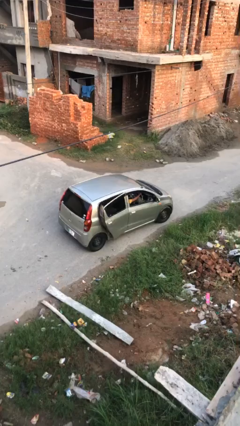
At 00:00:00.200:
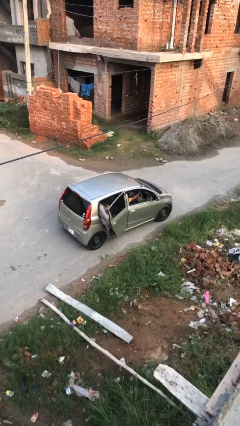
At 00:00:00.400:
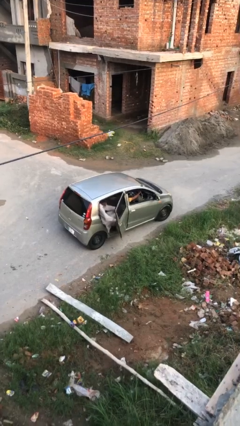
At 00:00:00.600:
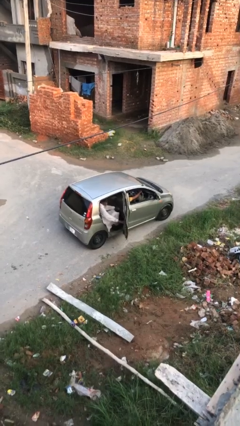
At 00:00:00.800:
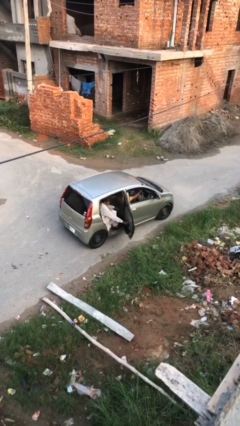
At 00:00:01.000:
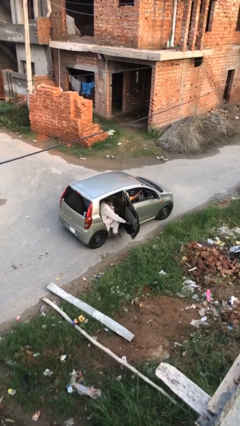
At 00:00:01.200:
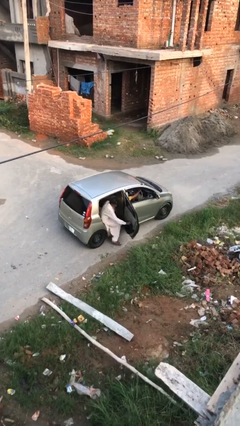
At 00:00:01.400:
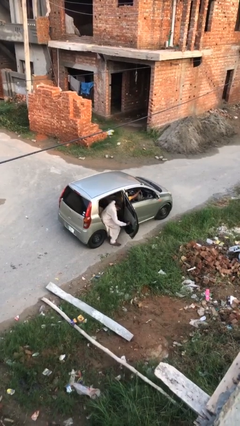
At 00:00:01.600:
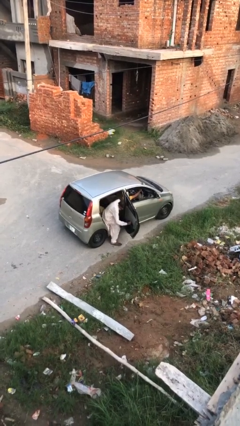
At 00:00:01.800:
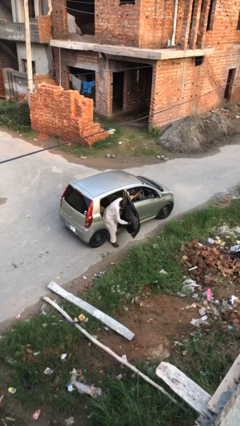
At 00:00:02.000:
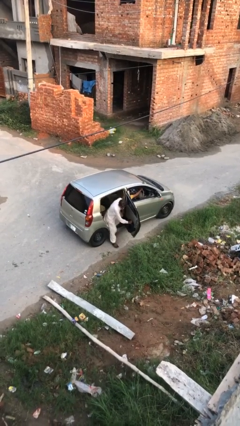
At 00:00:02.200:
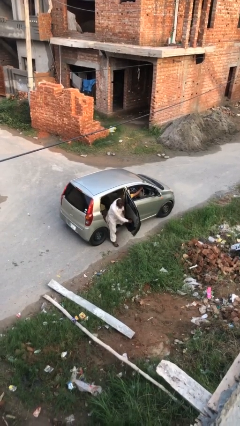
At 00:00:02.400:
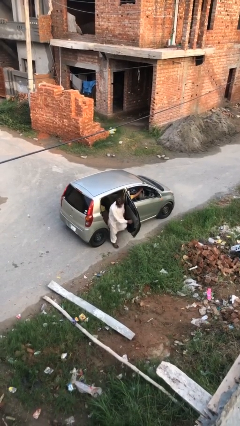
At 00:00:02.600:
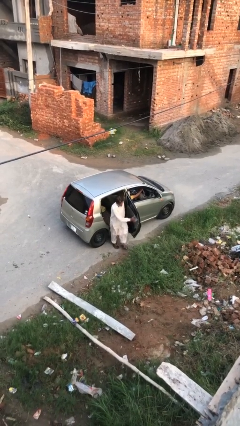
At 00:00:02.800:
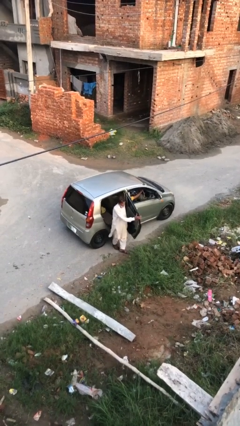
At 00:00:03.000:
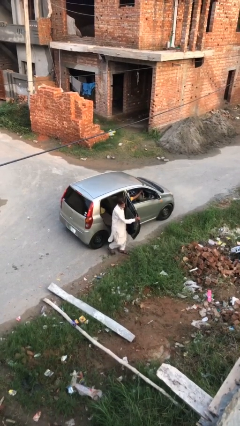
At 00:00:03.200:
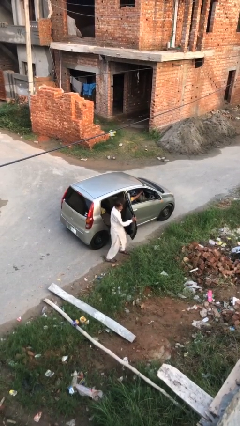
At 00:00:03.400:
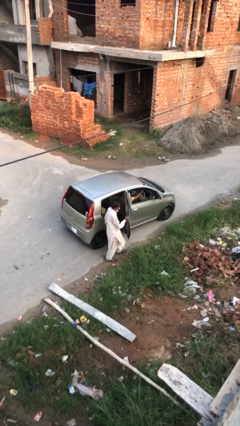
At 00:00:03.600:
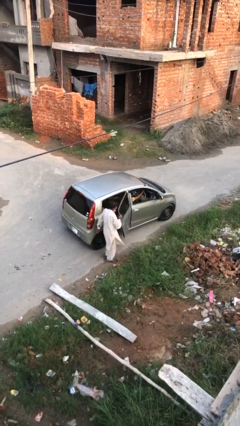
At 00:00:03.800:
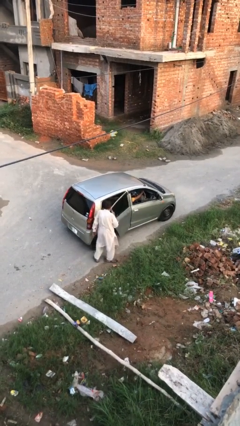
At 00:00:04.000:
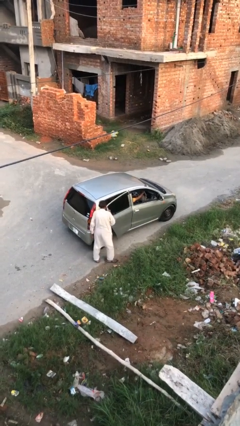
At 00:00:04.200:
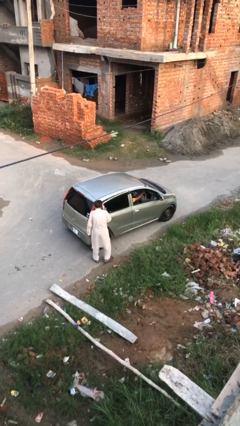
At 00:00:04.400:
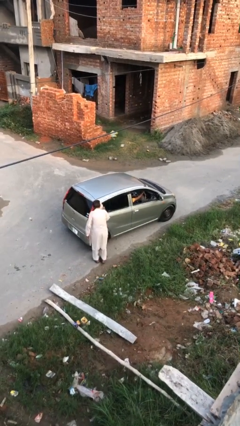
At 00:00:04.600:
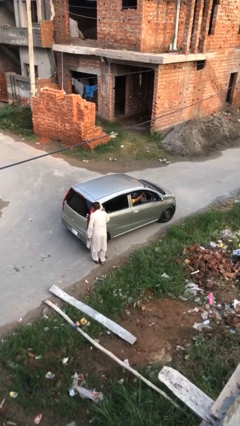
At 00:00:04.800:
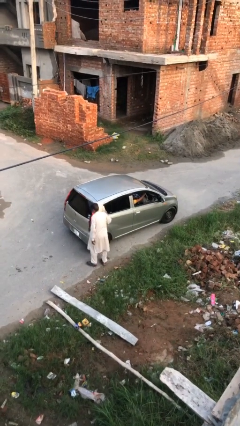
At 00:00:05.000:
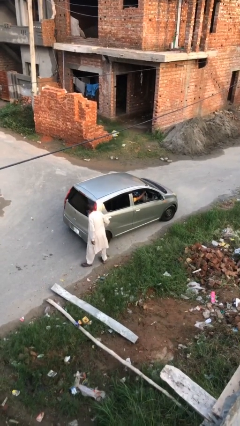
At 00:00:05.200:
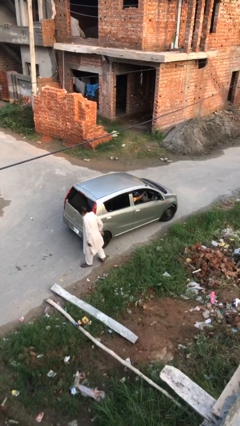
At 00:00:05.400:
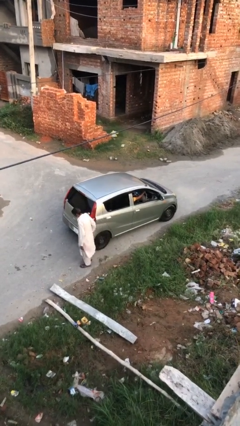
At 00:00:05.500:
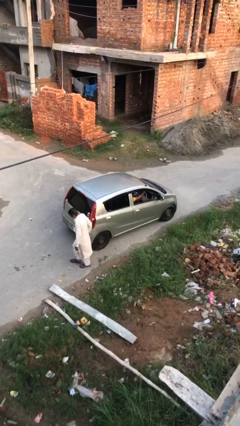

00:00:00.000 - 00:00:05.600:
car drops off person

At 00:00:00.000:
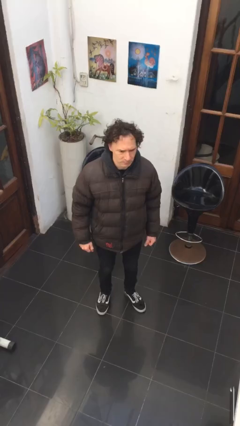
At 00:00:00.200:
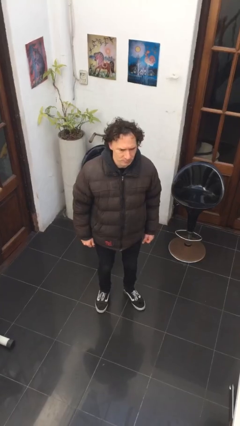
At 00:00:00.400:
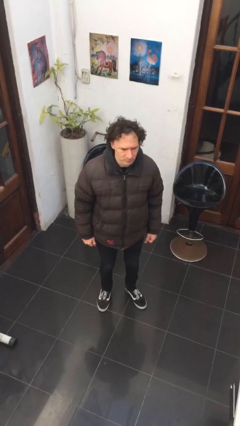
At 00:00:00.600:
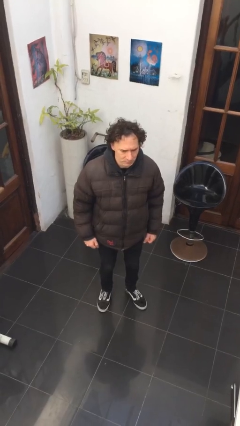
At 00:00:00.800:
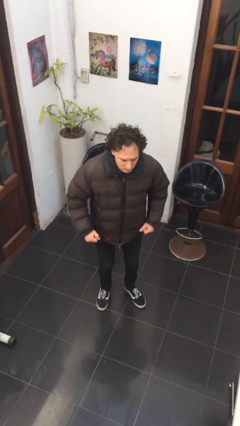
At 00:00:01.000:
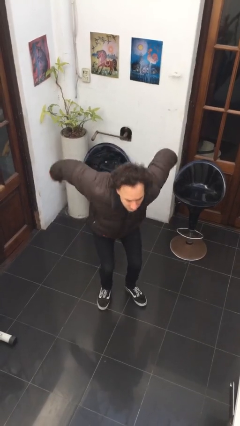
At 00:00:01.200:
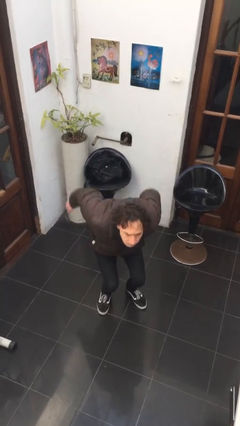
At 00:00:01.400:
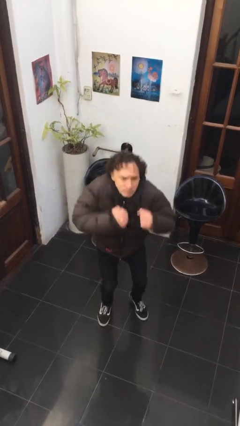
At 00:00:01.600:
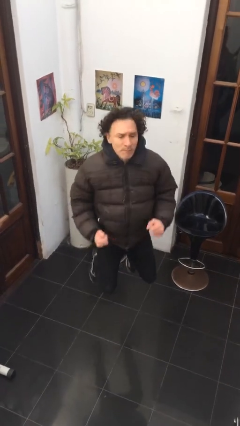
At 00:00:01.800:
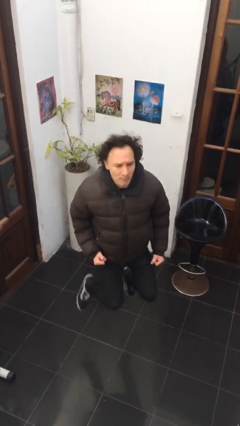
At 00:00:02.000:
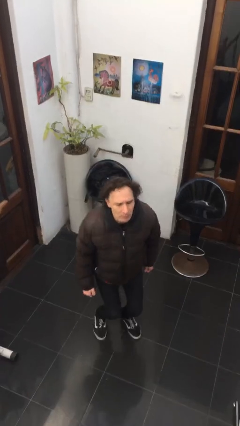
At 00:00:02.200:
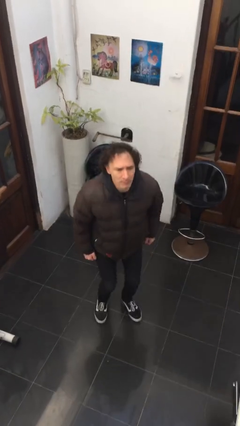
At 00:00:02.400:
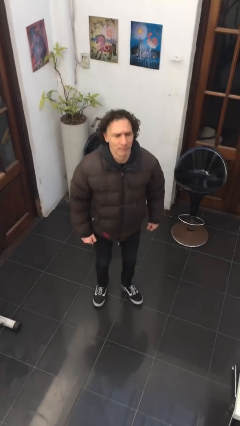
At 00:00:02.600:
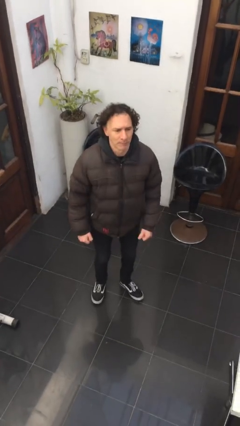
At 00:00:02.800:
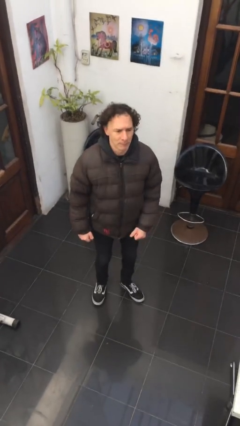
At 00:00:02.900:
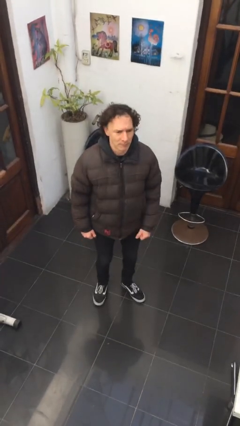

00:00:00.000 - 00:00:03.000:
person jumps

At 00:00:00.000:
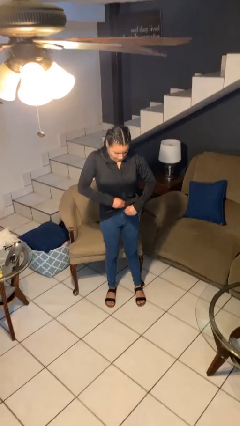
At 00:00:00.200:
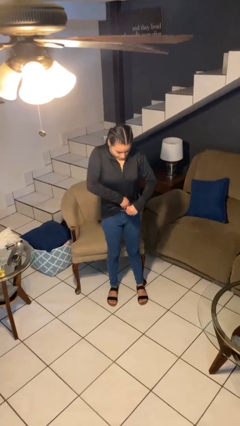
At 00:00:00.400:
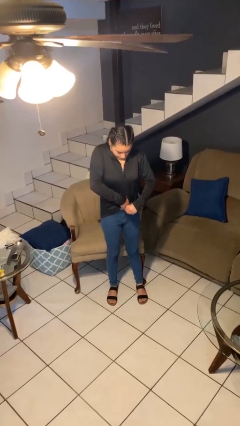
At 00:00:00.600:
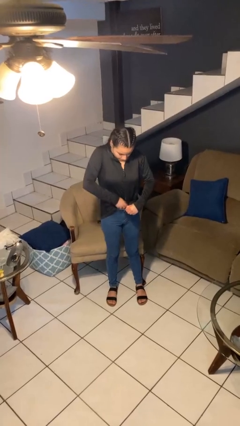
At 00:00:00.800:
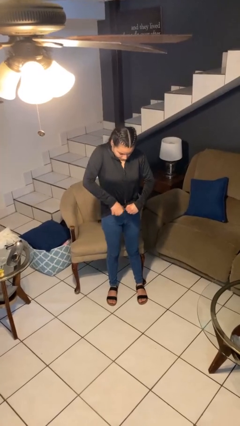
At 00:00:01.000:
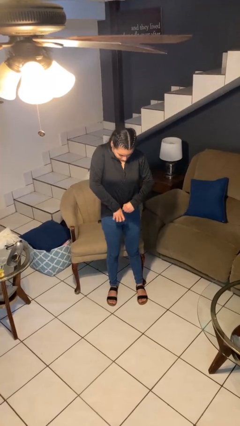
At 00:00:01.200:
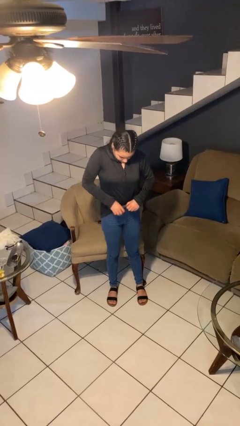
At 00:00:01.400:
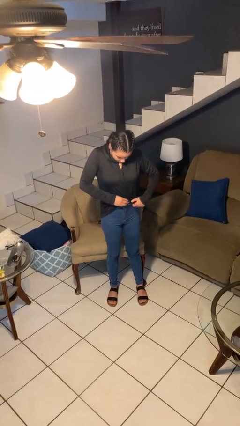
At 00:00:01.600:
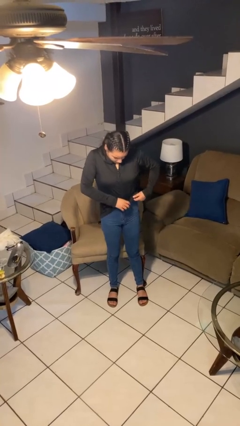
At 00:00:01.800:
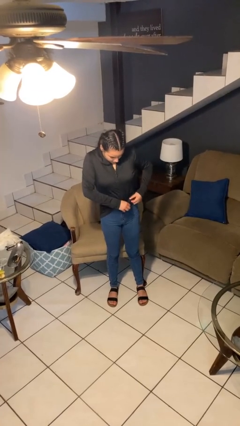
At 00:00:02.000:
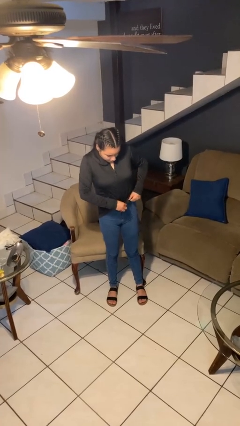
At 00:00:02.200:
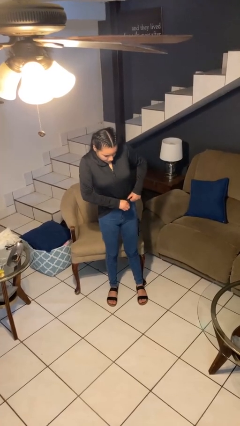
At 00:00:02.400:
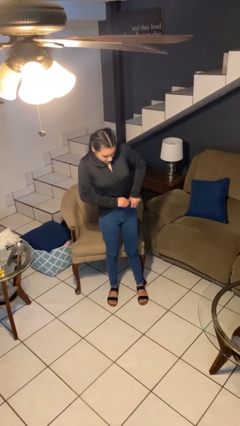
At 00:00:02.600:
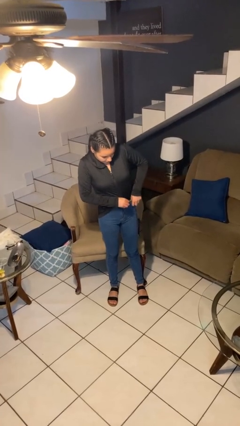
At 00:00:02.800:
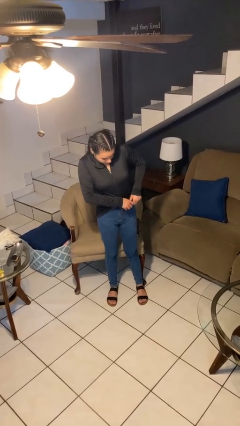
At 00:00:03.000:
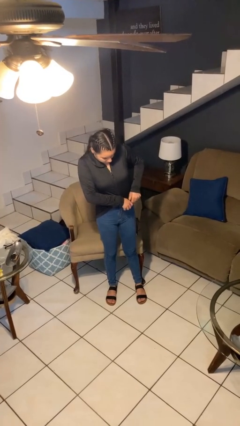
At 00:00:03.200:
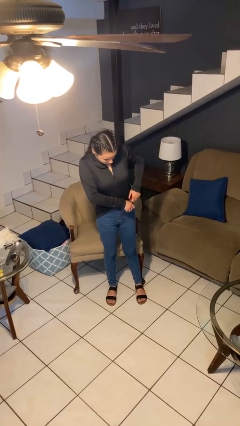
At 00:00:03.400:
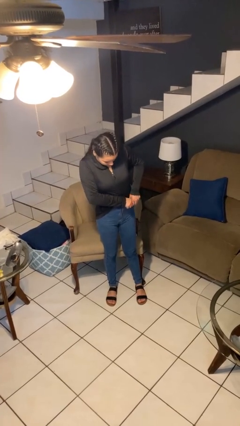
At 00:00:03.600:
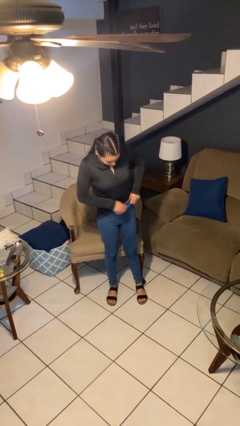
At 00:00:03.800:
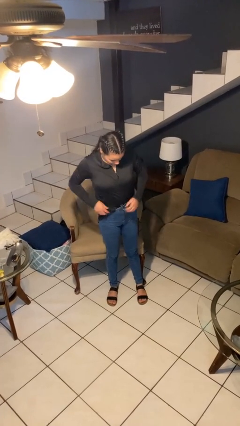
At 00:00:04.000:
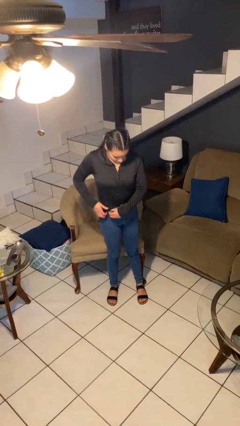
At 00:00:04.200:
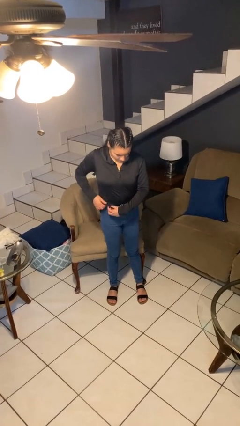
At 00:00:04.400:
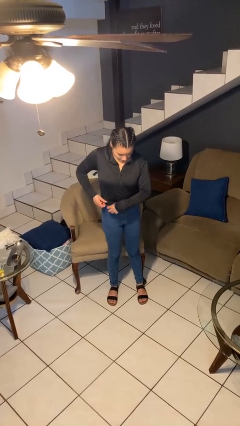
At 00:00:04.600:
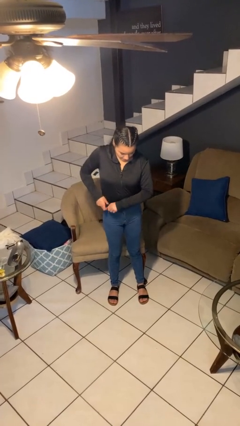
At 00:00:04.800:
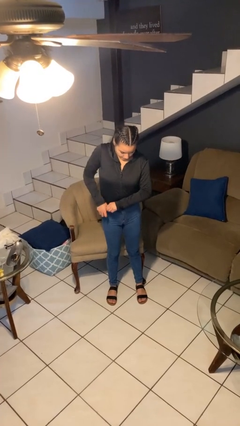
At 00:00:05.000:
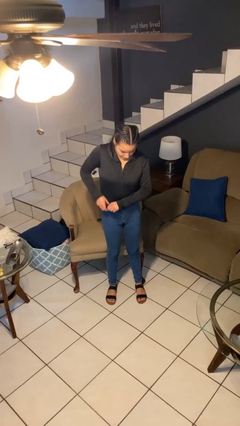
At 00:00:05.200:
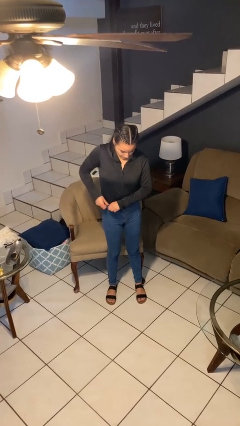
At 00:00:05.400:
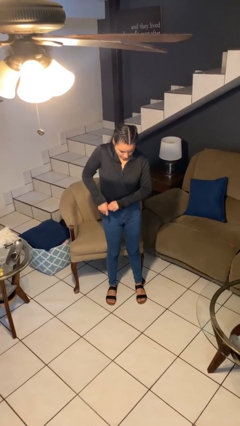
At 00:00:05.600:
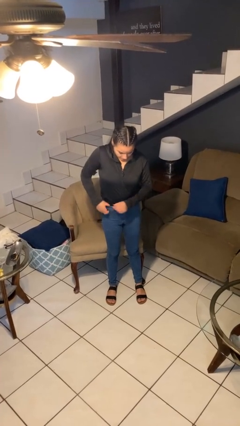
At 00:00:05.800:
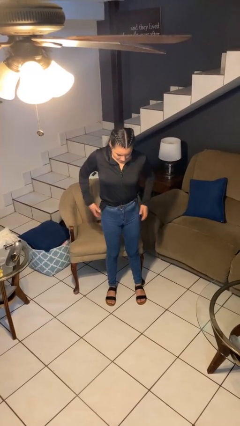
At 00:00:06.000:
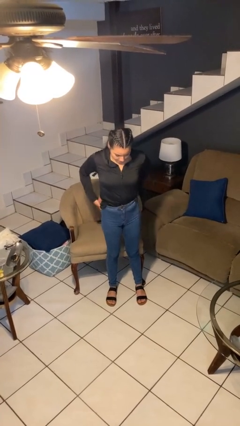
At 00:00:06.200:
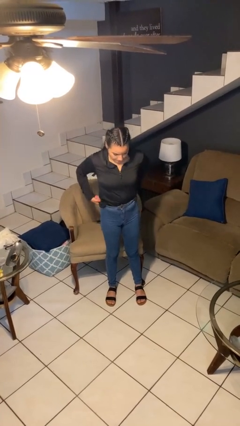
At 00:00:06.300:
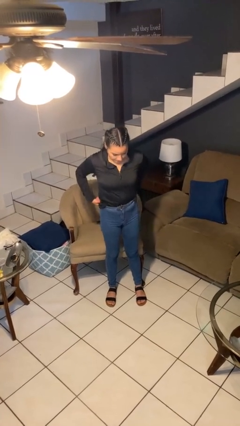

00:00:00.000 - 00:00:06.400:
person tucks in shirt

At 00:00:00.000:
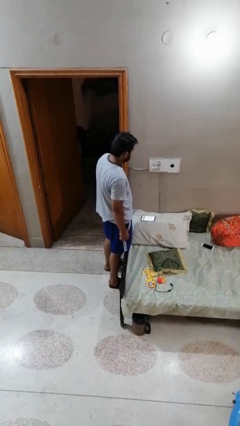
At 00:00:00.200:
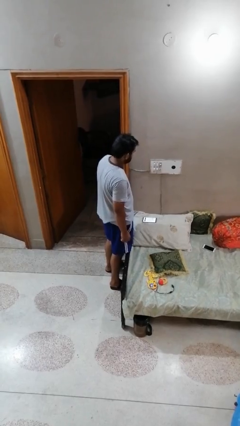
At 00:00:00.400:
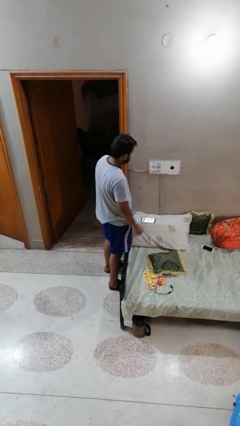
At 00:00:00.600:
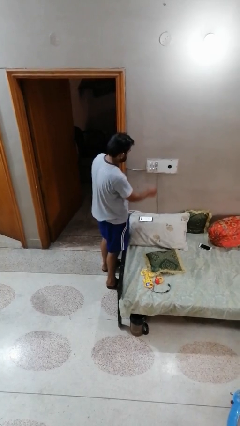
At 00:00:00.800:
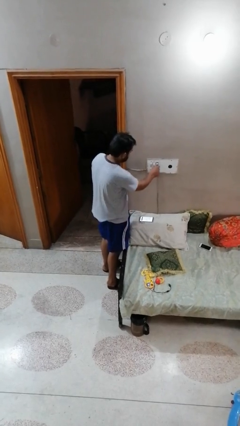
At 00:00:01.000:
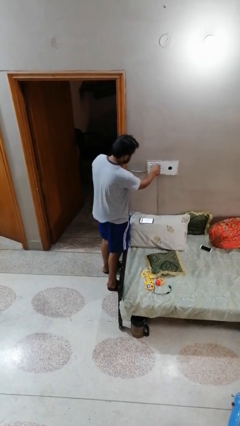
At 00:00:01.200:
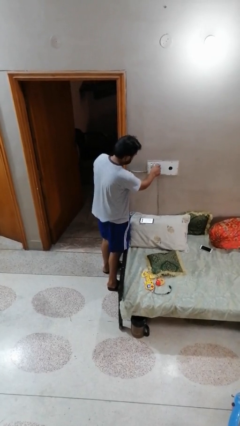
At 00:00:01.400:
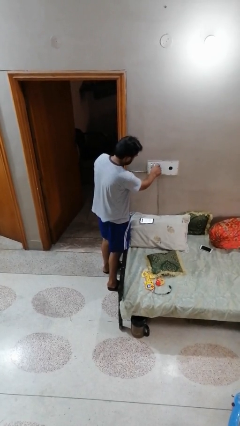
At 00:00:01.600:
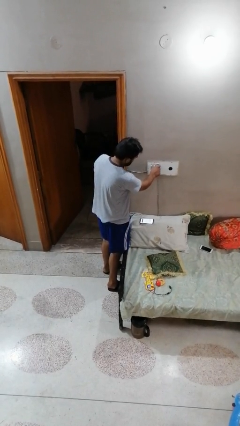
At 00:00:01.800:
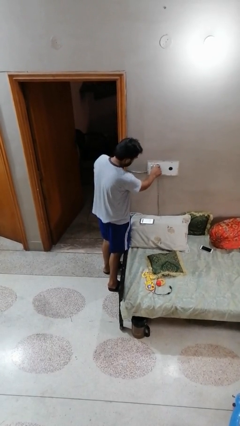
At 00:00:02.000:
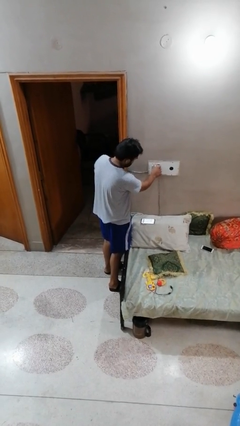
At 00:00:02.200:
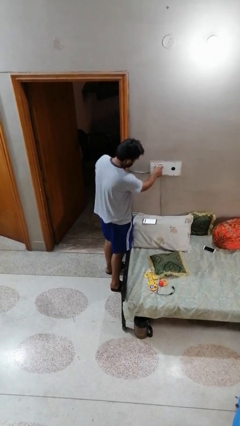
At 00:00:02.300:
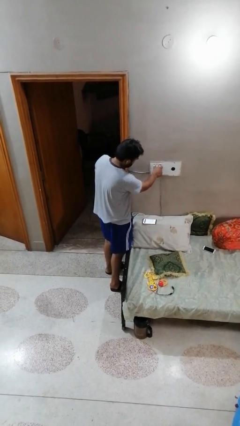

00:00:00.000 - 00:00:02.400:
person adjusts thermostat
